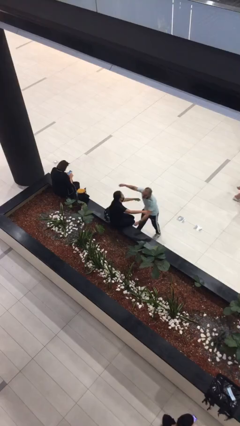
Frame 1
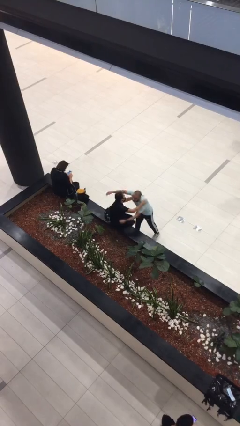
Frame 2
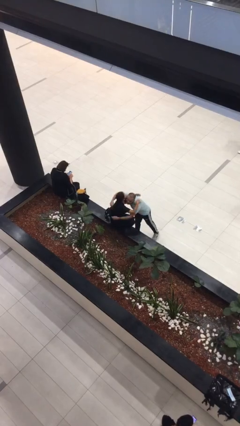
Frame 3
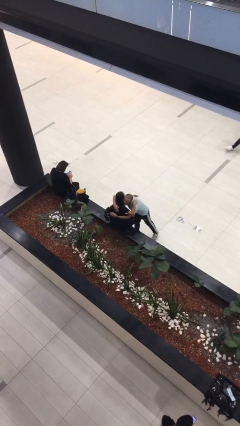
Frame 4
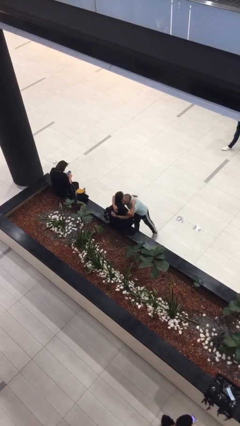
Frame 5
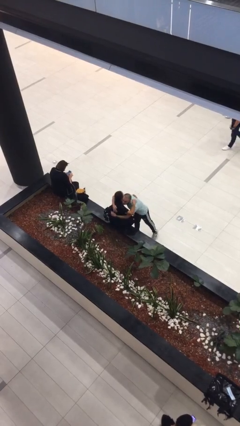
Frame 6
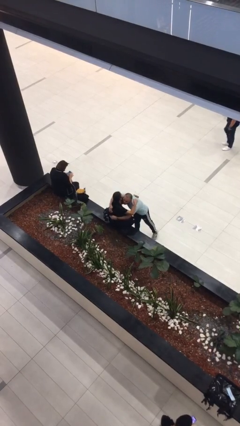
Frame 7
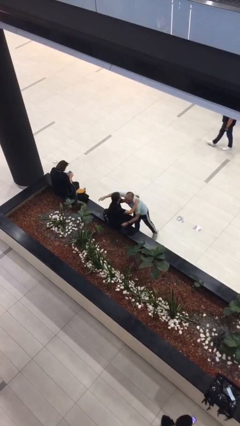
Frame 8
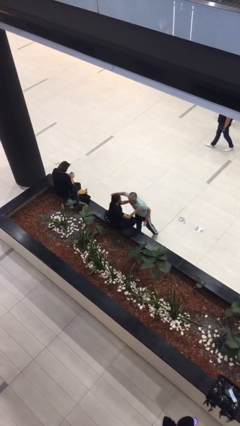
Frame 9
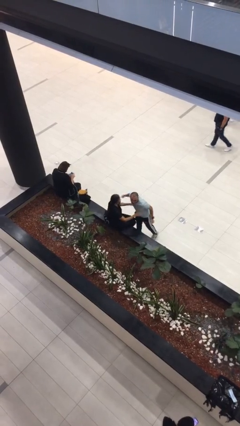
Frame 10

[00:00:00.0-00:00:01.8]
person embraces person

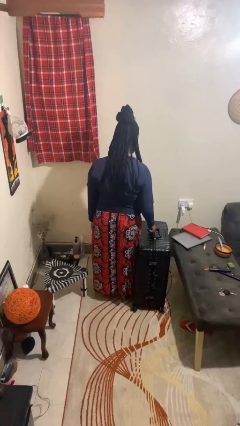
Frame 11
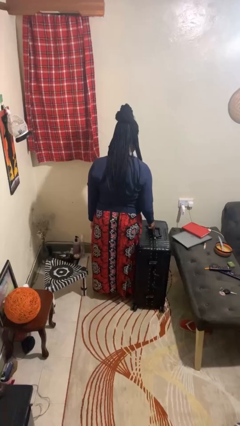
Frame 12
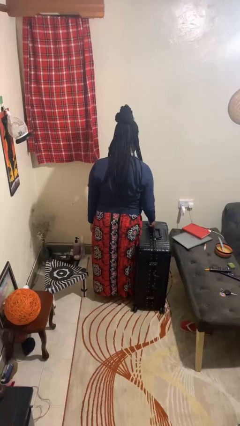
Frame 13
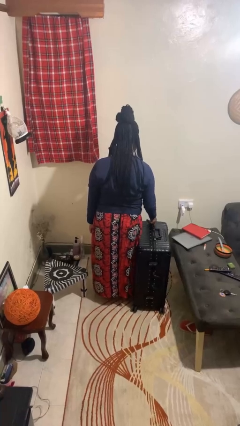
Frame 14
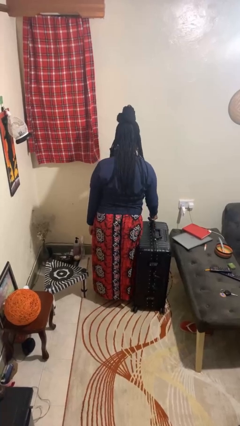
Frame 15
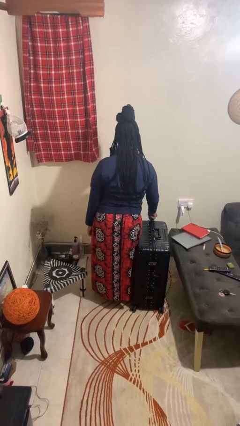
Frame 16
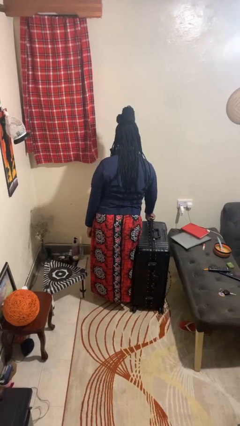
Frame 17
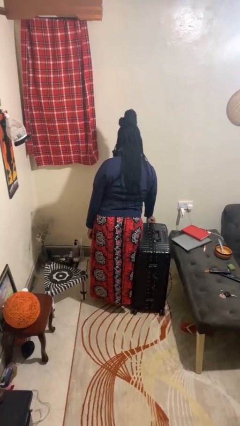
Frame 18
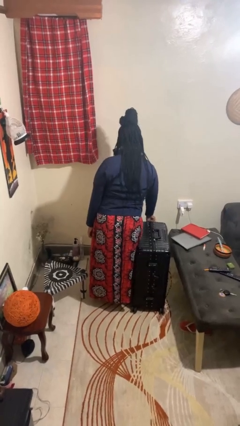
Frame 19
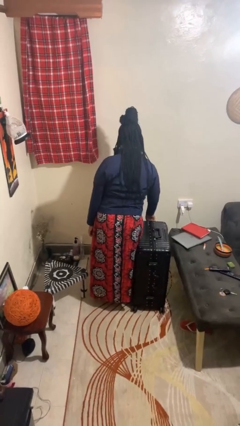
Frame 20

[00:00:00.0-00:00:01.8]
person closes suitcase

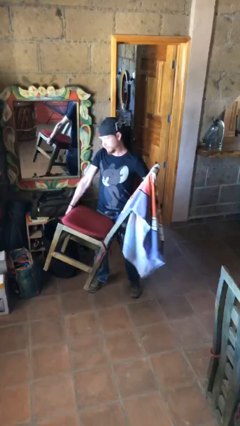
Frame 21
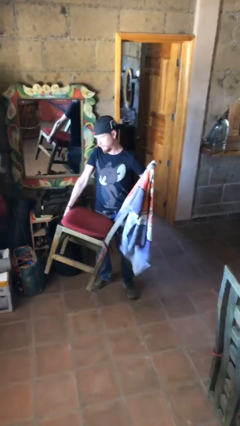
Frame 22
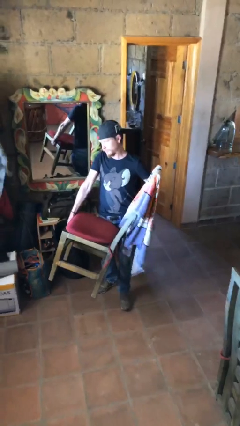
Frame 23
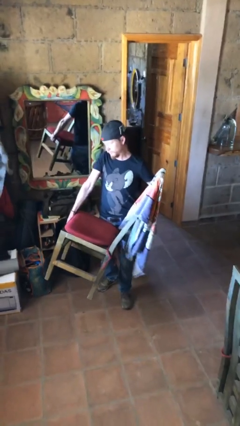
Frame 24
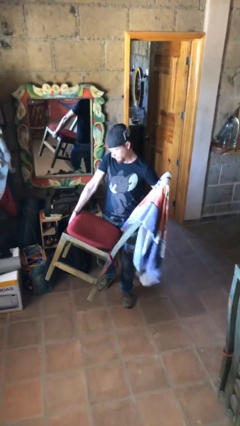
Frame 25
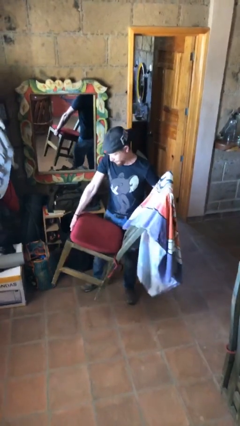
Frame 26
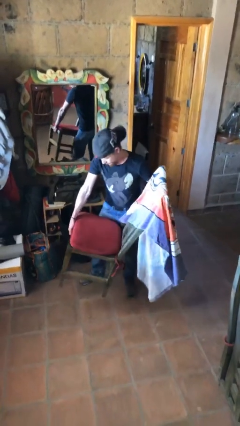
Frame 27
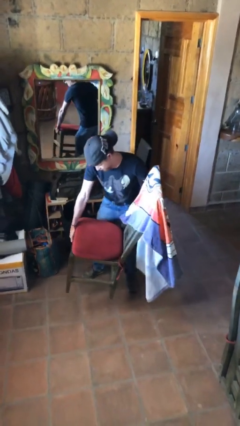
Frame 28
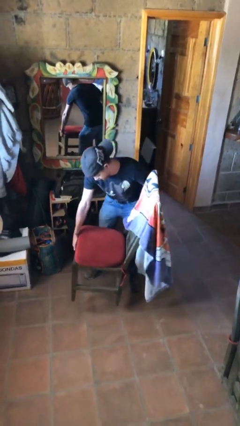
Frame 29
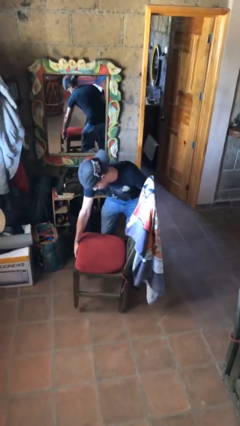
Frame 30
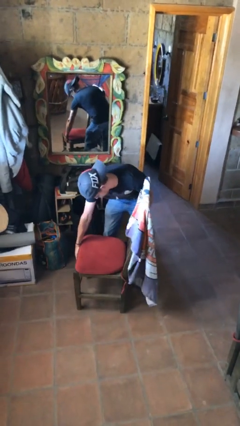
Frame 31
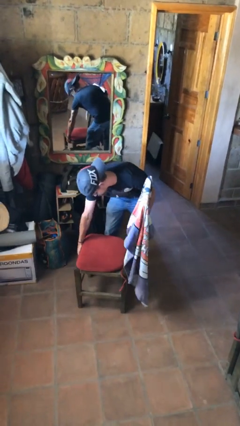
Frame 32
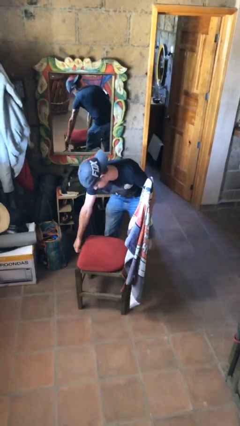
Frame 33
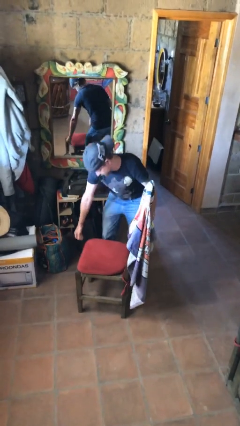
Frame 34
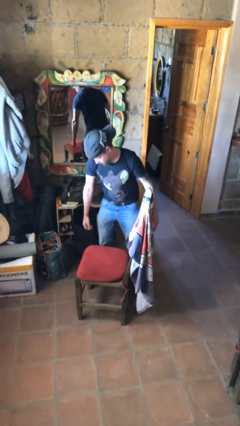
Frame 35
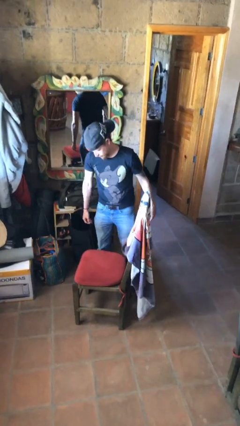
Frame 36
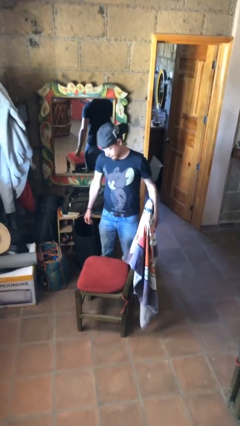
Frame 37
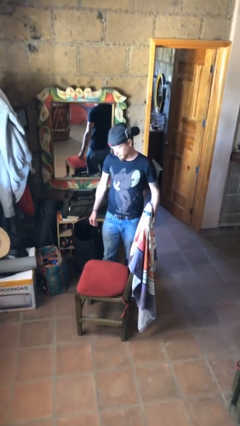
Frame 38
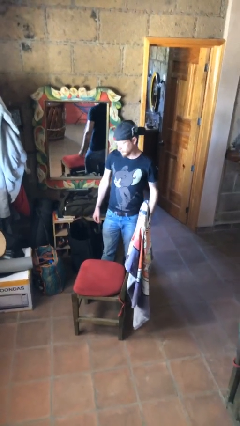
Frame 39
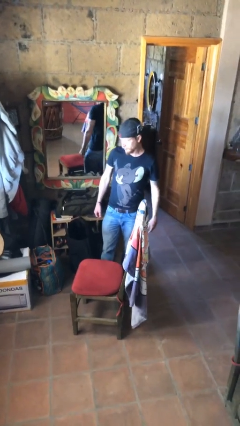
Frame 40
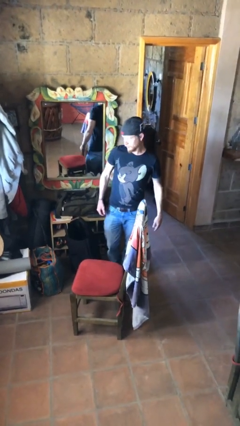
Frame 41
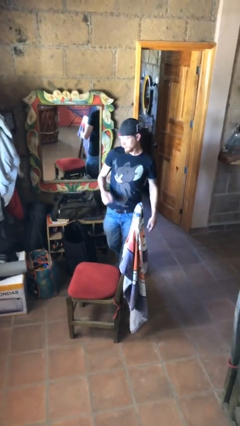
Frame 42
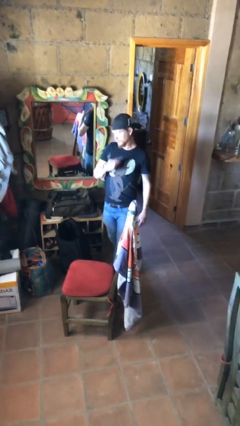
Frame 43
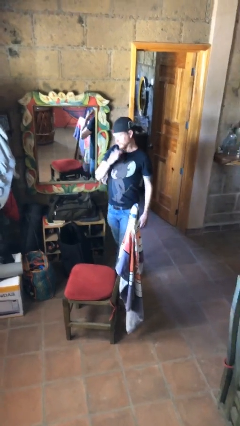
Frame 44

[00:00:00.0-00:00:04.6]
person puts down object on floor

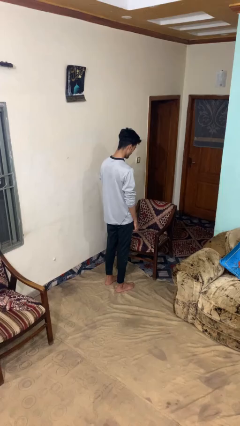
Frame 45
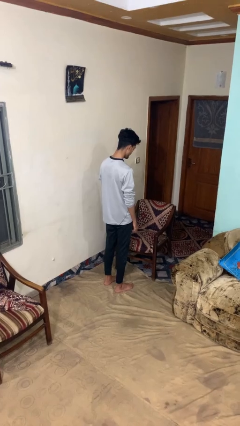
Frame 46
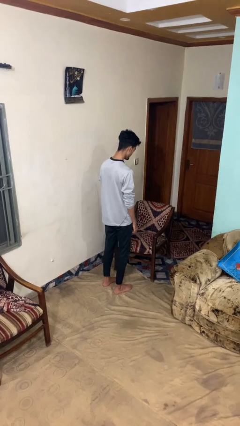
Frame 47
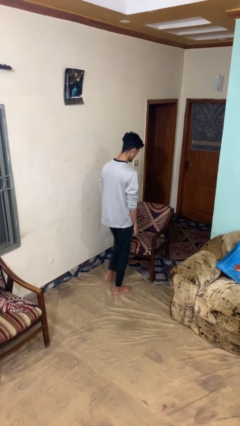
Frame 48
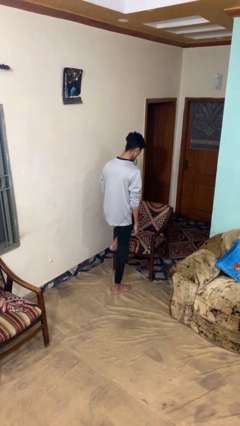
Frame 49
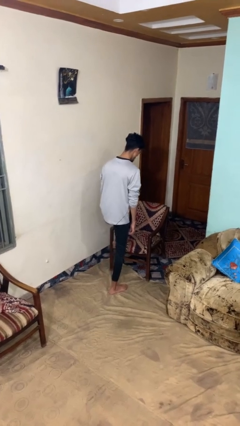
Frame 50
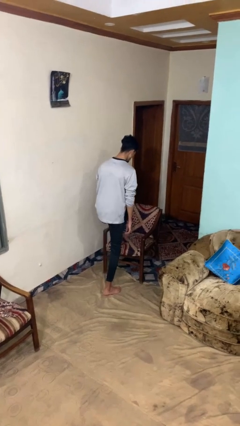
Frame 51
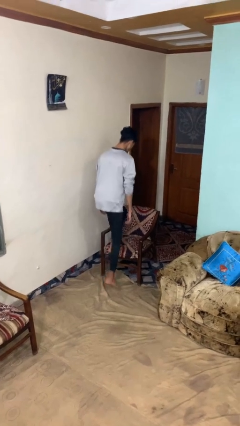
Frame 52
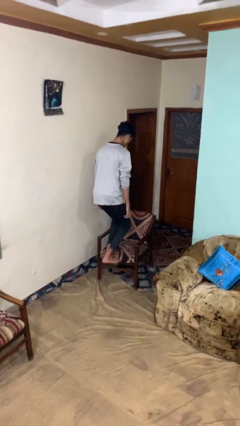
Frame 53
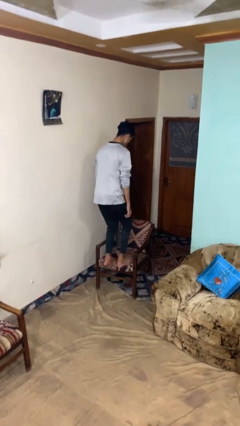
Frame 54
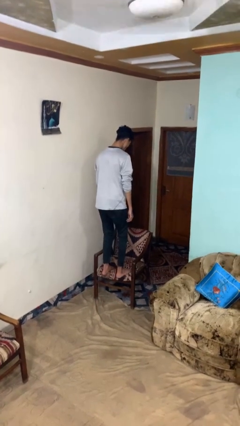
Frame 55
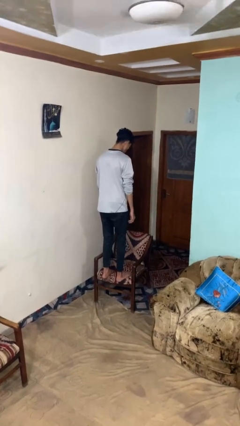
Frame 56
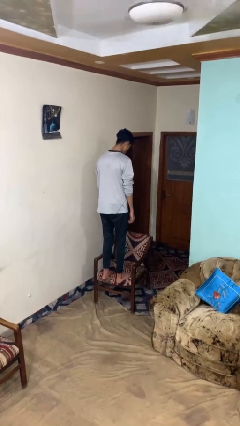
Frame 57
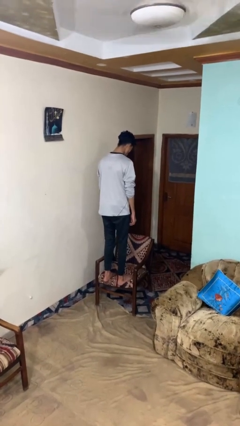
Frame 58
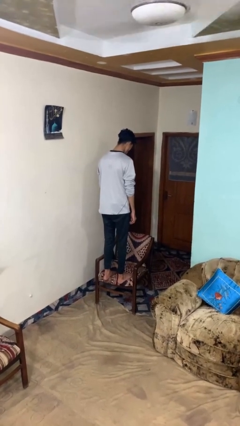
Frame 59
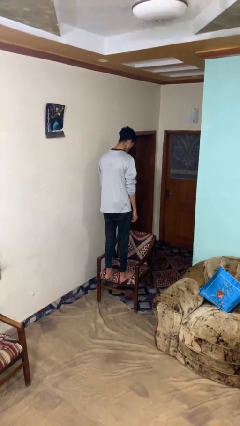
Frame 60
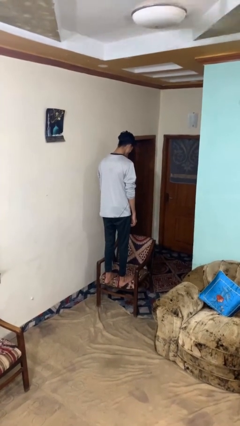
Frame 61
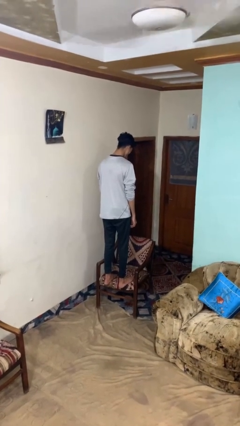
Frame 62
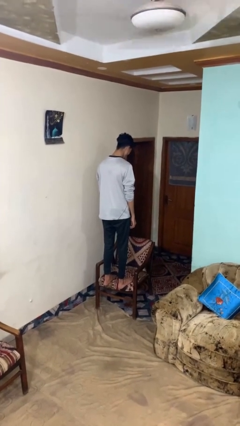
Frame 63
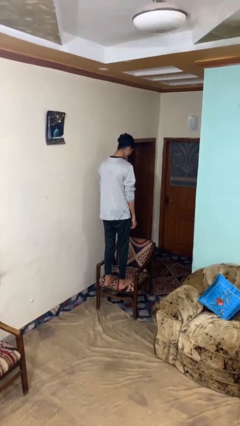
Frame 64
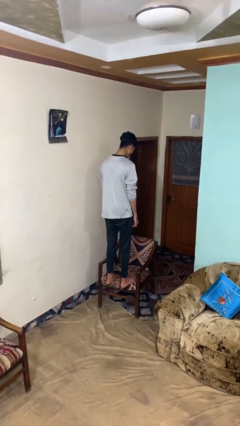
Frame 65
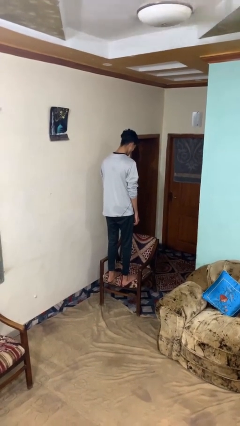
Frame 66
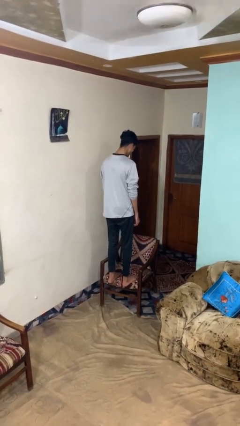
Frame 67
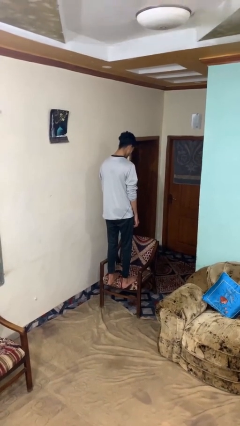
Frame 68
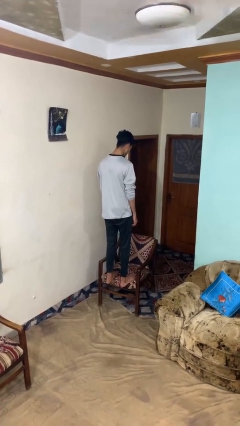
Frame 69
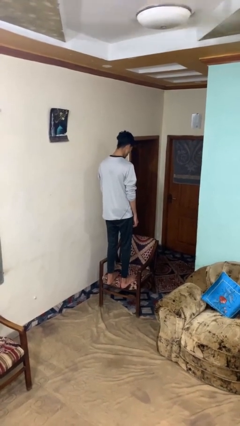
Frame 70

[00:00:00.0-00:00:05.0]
person climbs on chair

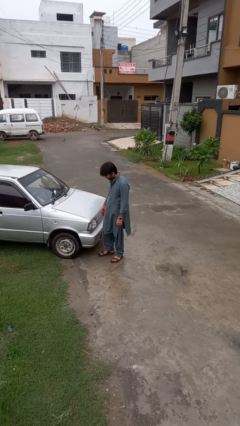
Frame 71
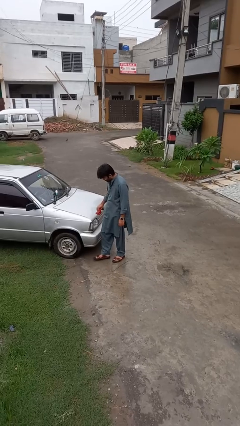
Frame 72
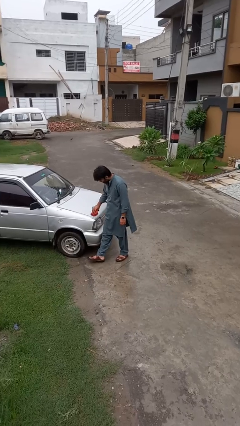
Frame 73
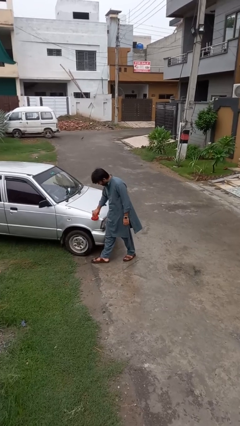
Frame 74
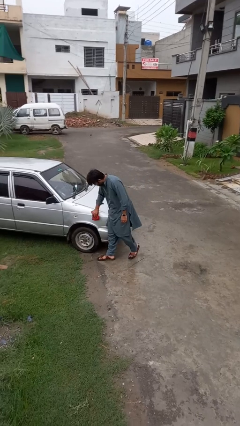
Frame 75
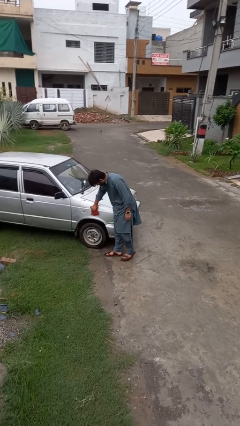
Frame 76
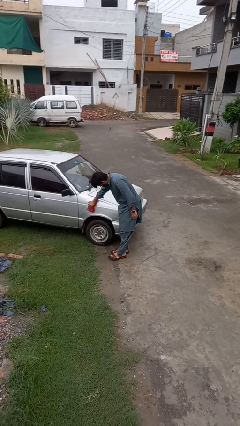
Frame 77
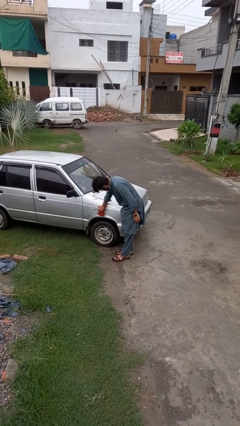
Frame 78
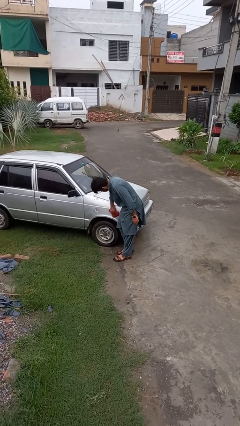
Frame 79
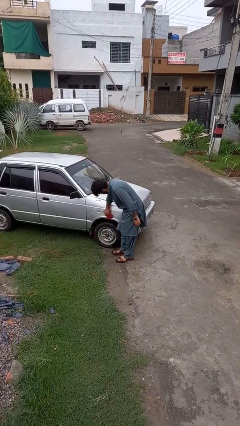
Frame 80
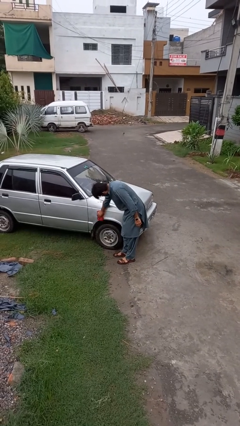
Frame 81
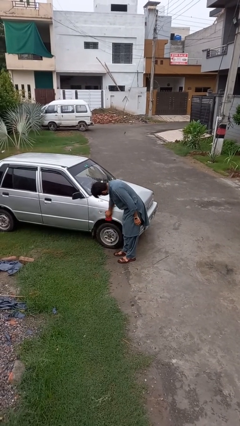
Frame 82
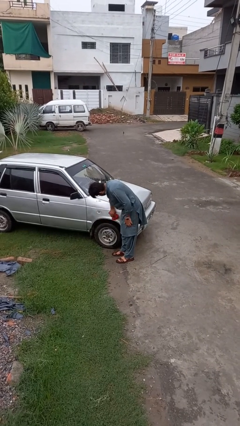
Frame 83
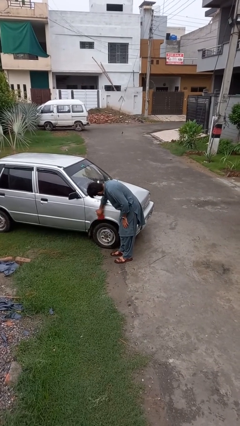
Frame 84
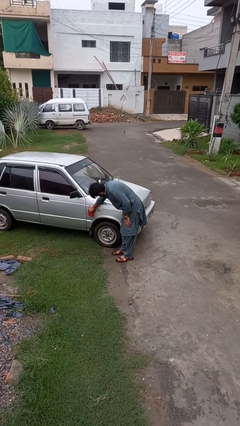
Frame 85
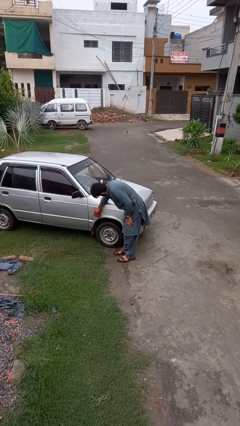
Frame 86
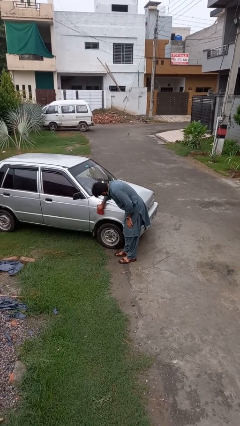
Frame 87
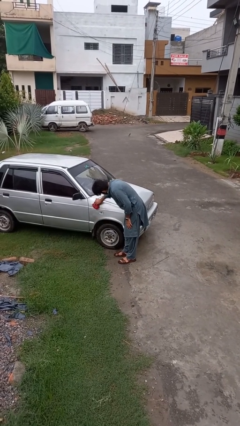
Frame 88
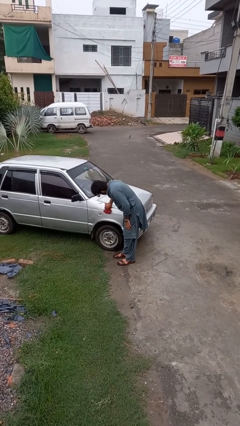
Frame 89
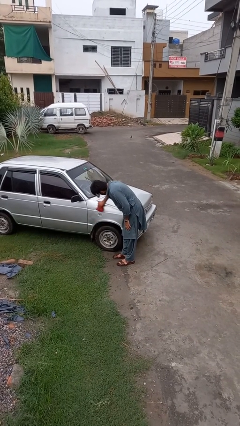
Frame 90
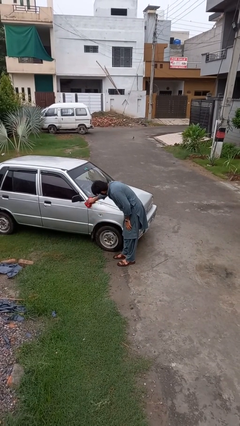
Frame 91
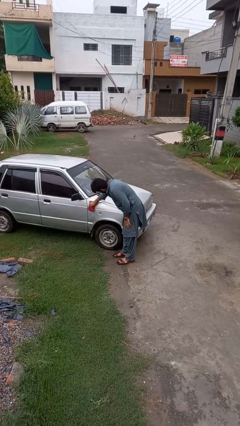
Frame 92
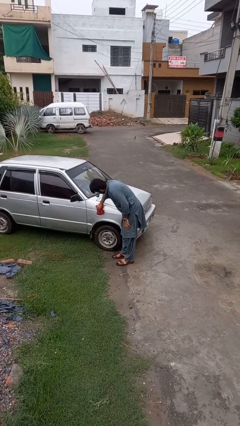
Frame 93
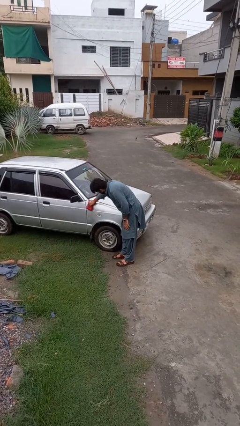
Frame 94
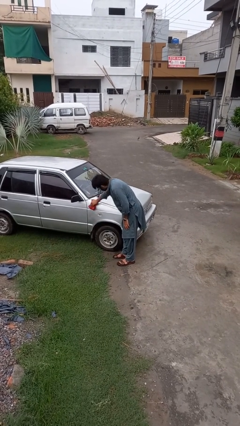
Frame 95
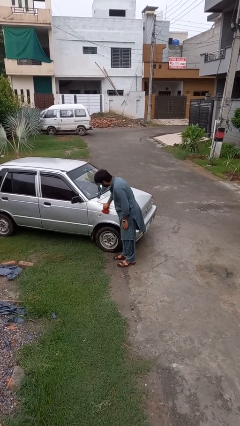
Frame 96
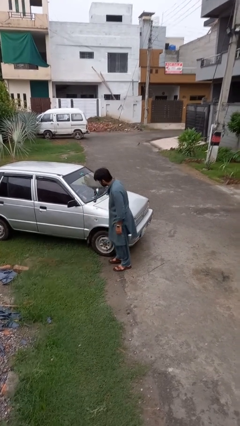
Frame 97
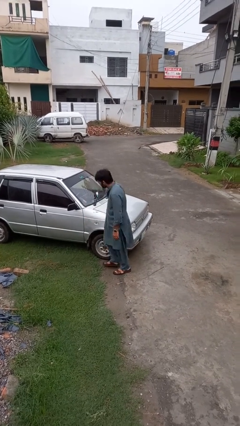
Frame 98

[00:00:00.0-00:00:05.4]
person polishes car with rag
